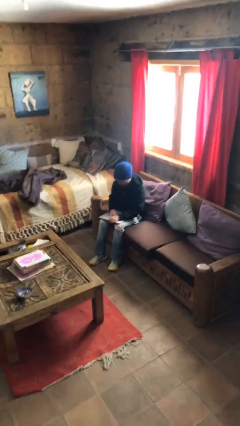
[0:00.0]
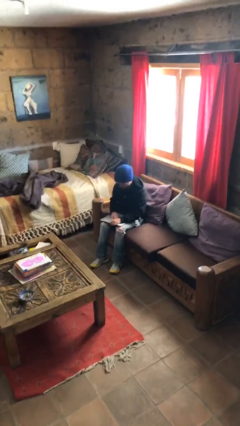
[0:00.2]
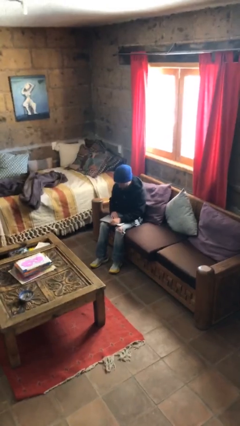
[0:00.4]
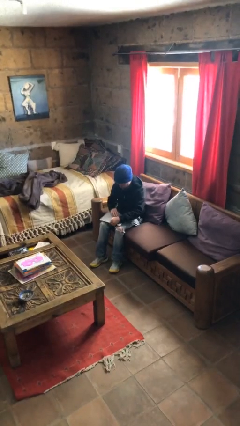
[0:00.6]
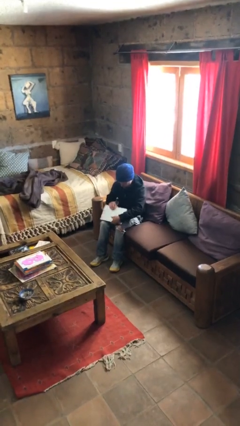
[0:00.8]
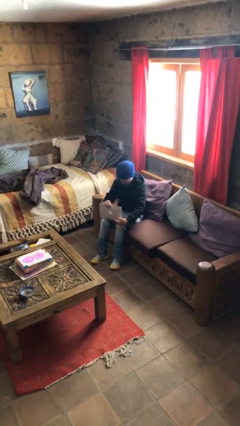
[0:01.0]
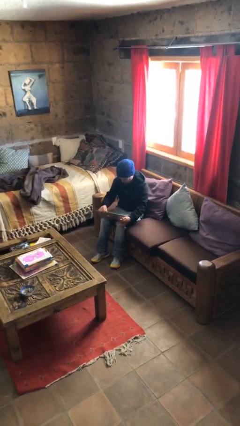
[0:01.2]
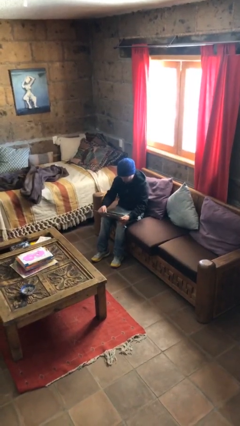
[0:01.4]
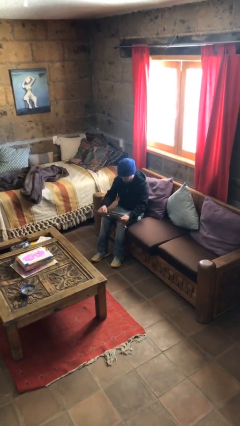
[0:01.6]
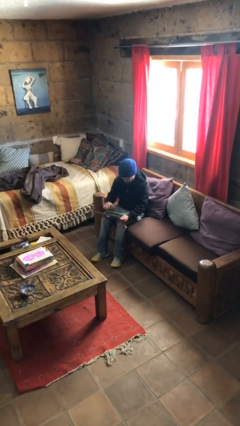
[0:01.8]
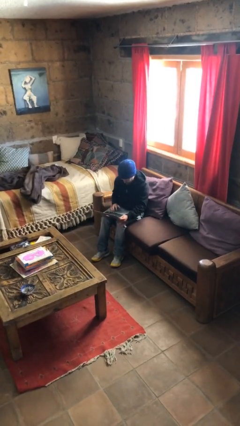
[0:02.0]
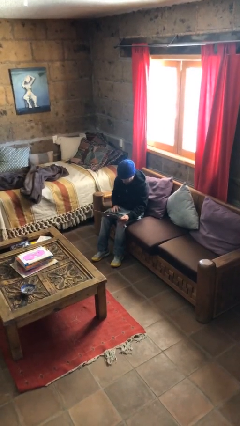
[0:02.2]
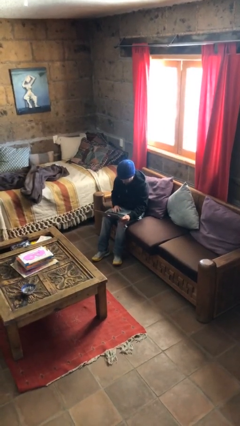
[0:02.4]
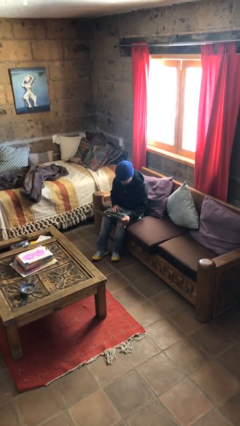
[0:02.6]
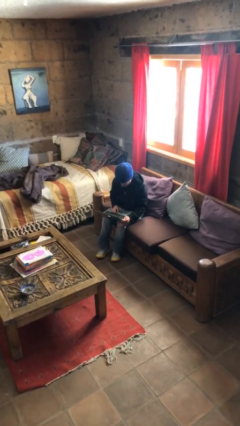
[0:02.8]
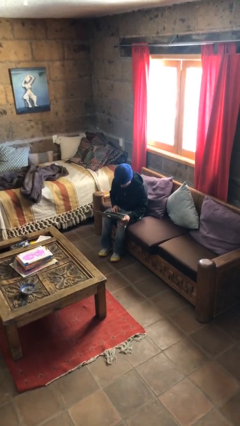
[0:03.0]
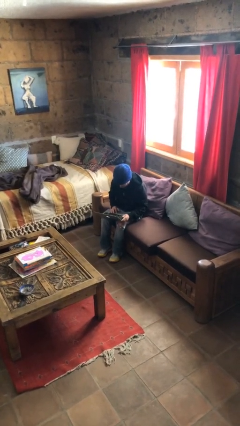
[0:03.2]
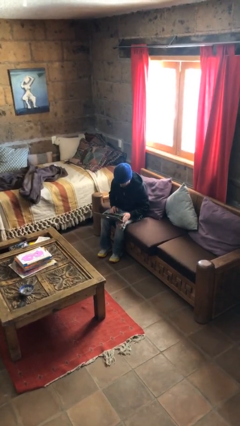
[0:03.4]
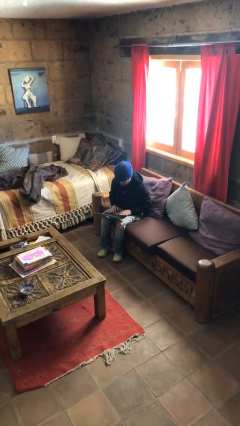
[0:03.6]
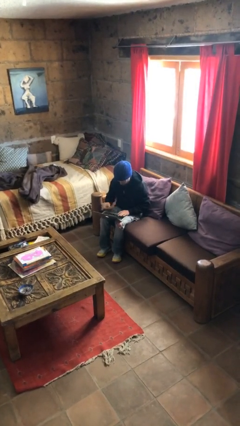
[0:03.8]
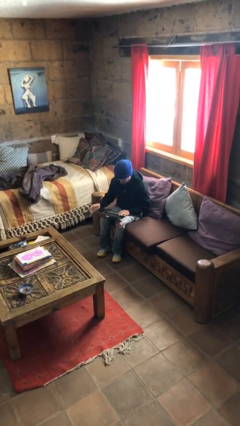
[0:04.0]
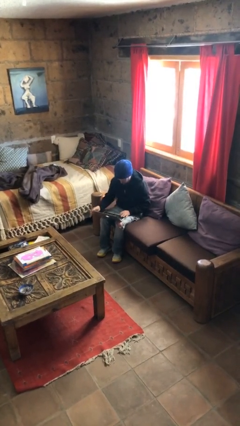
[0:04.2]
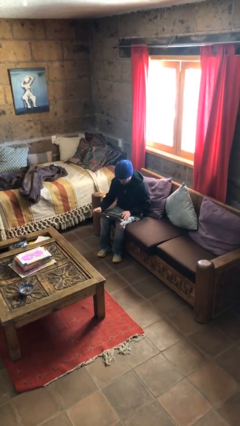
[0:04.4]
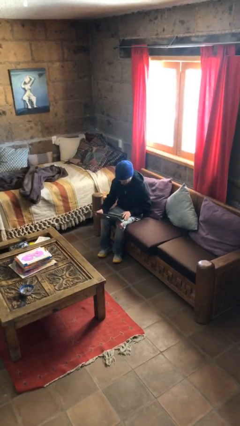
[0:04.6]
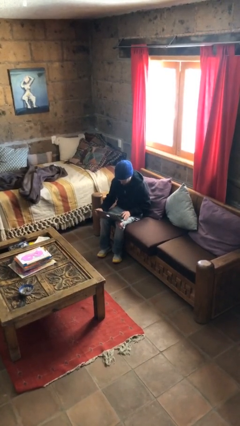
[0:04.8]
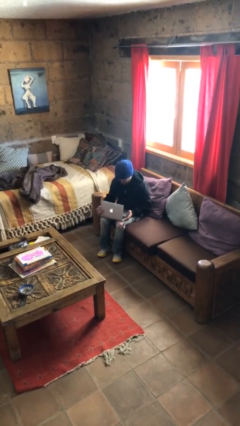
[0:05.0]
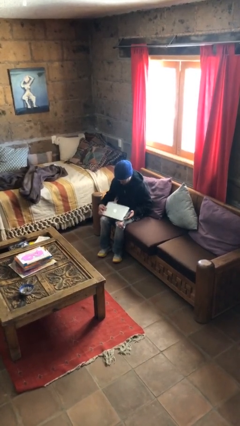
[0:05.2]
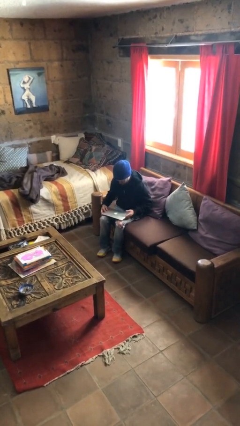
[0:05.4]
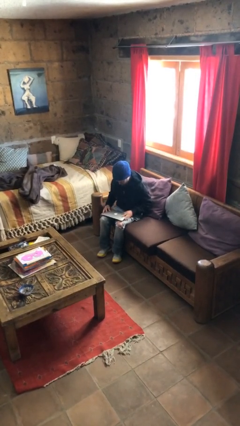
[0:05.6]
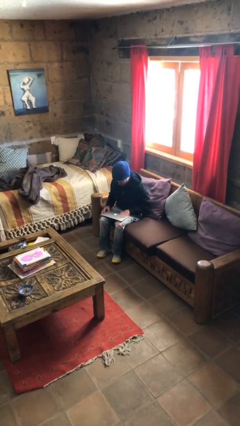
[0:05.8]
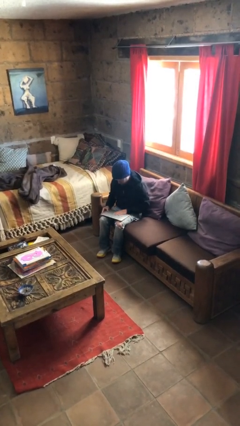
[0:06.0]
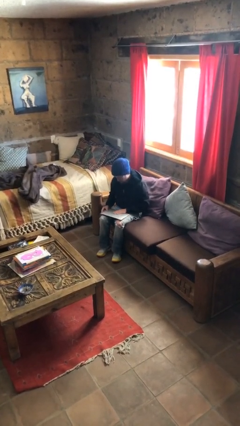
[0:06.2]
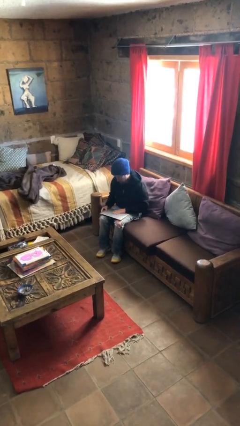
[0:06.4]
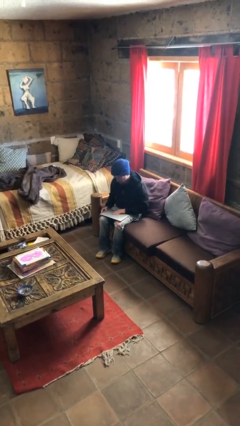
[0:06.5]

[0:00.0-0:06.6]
person interacts with laptop

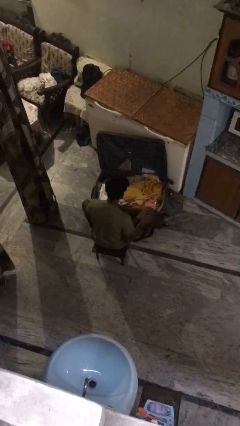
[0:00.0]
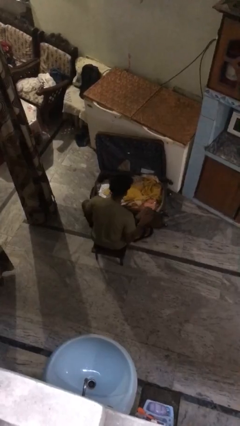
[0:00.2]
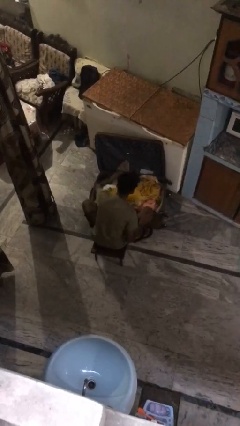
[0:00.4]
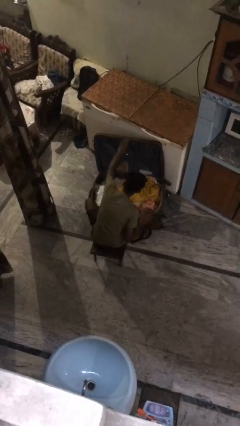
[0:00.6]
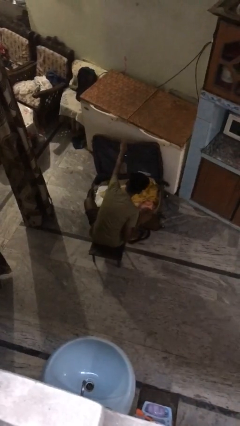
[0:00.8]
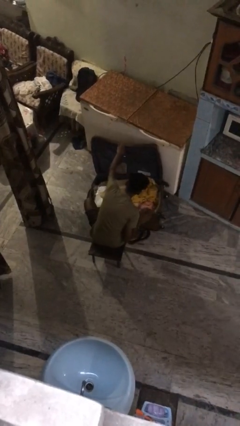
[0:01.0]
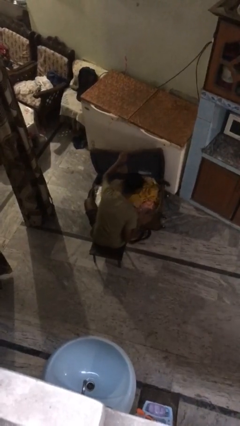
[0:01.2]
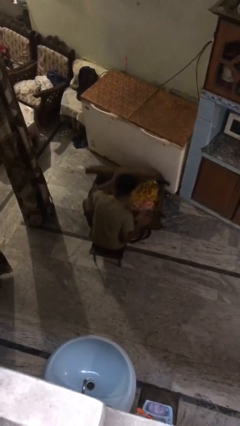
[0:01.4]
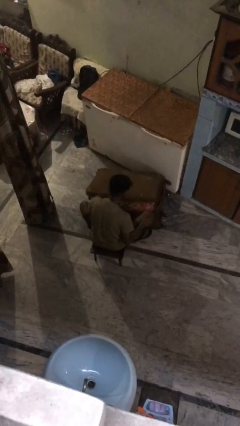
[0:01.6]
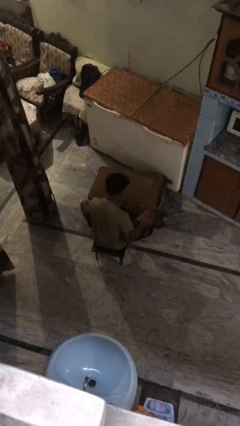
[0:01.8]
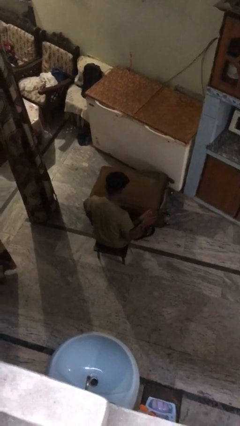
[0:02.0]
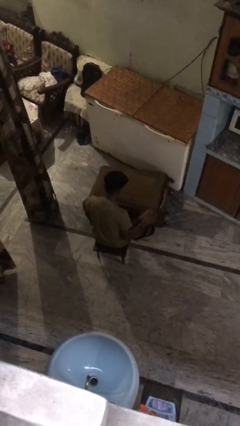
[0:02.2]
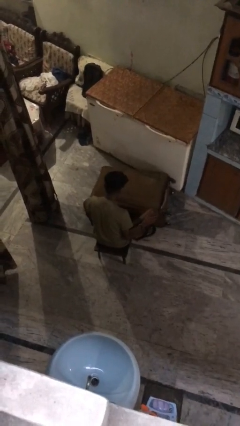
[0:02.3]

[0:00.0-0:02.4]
person closes suitcase

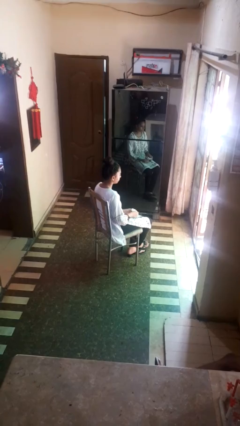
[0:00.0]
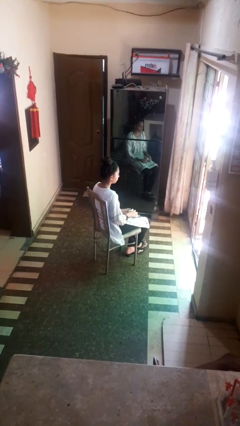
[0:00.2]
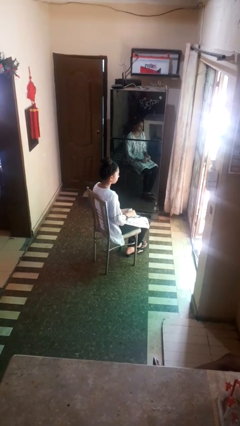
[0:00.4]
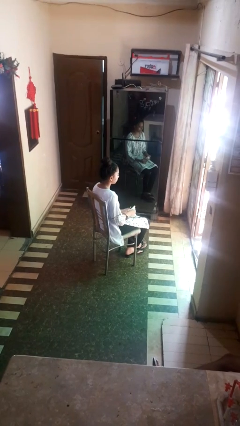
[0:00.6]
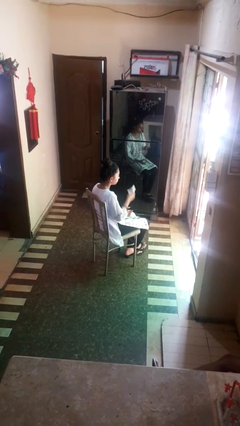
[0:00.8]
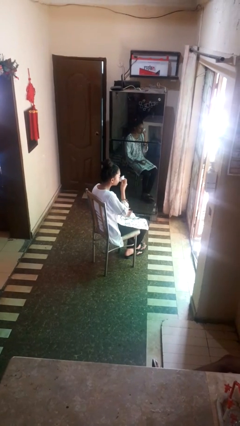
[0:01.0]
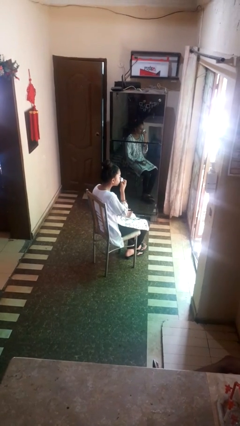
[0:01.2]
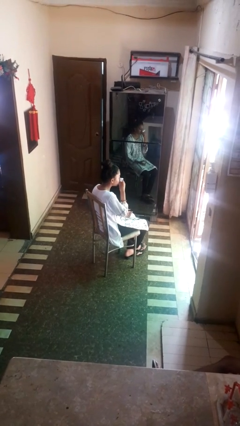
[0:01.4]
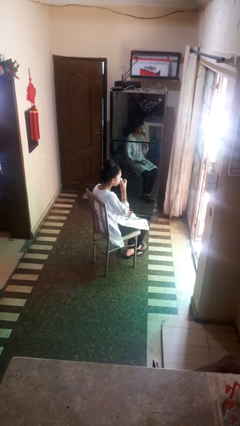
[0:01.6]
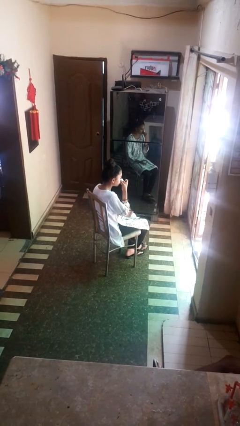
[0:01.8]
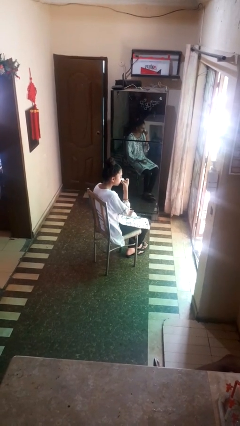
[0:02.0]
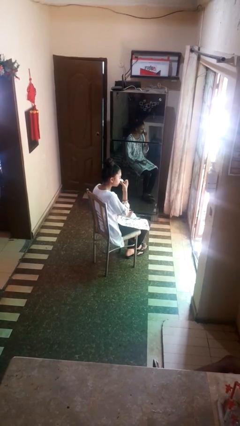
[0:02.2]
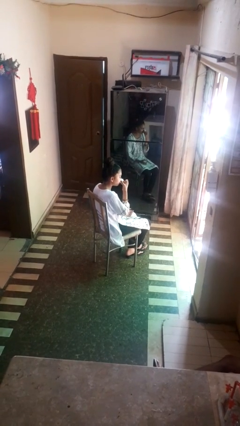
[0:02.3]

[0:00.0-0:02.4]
person blows nose

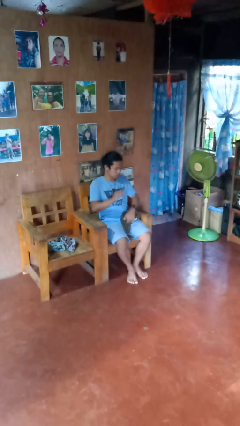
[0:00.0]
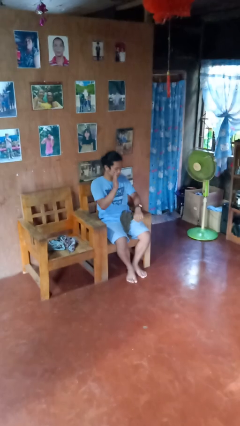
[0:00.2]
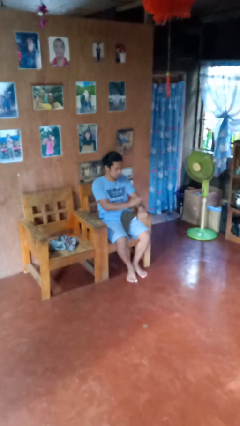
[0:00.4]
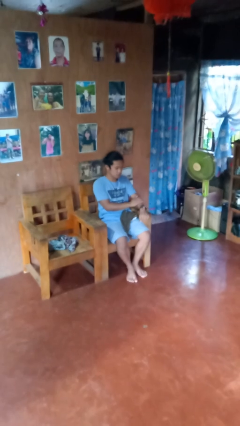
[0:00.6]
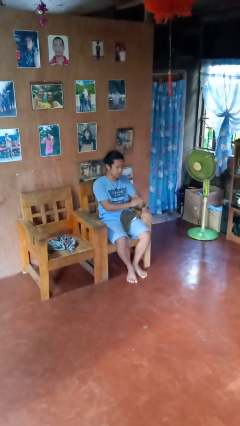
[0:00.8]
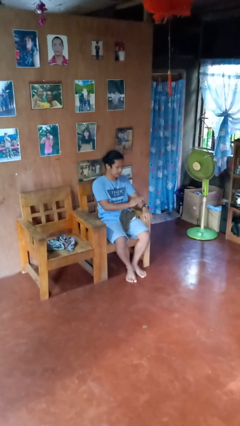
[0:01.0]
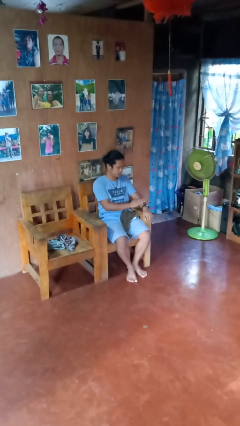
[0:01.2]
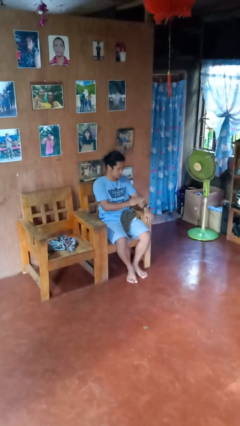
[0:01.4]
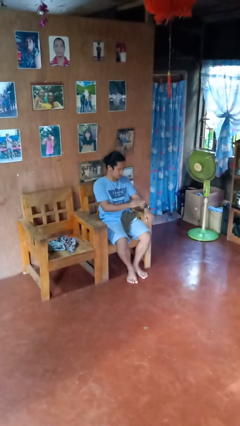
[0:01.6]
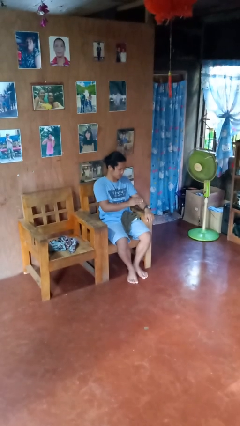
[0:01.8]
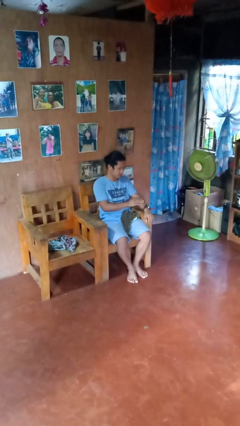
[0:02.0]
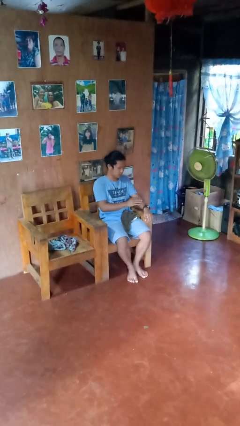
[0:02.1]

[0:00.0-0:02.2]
person swats bug

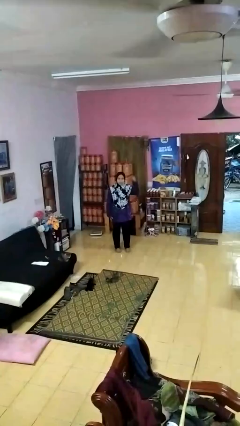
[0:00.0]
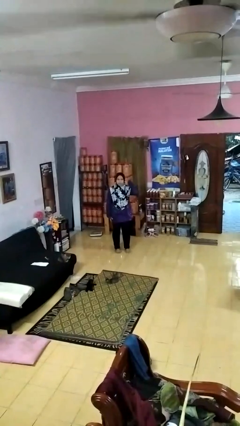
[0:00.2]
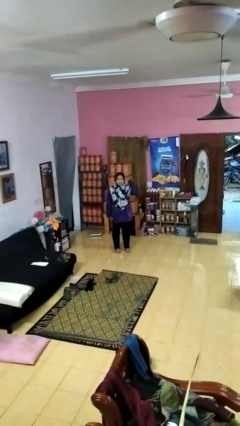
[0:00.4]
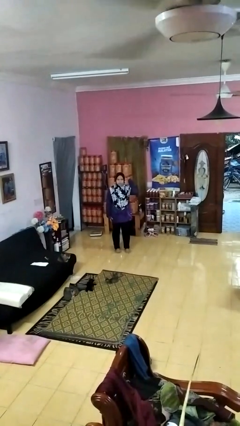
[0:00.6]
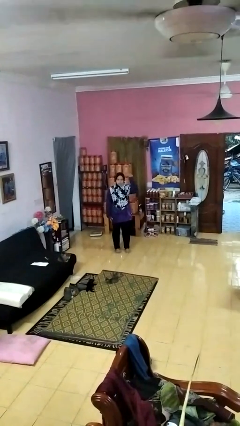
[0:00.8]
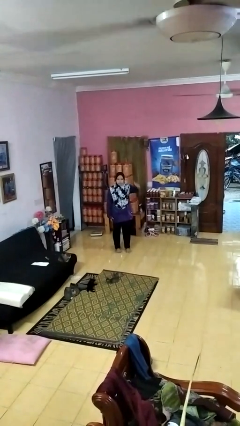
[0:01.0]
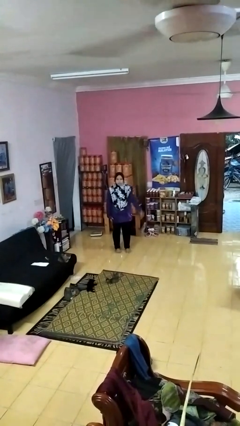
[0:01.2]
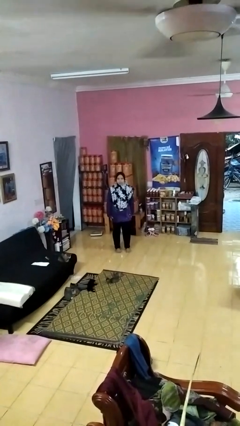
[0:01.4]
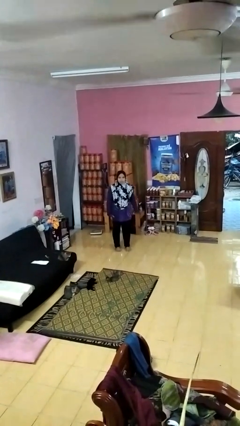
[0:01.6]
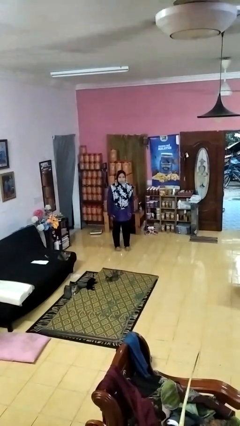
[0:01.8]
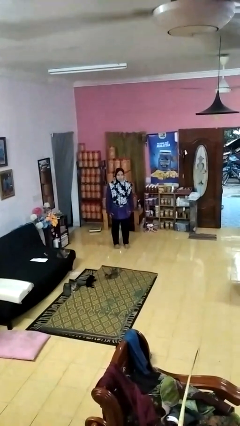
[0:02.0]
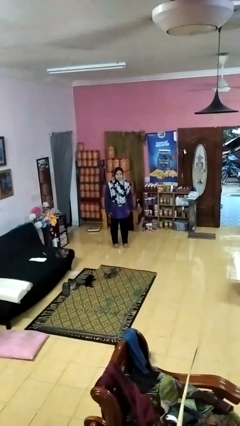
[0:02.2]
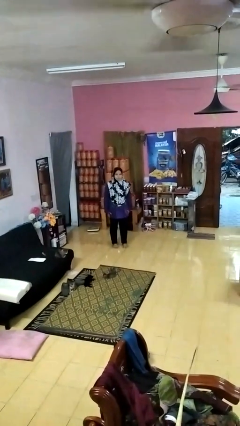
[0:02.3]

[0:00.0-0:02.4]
person gestures behind me

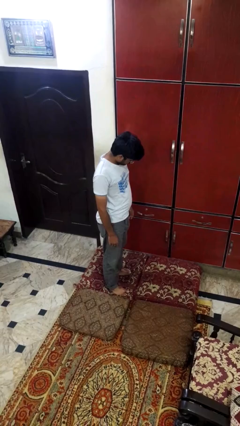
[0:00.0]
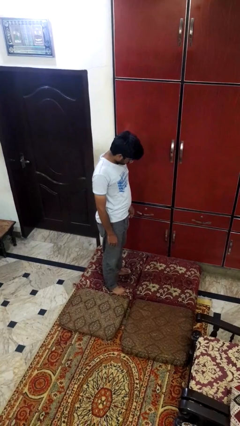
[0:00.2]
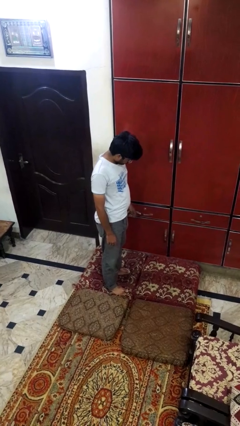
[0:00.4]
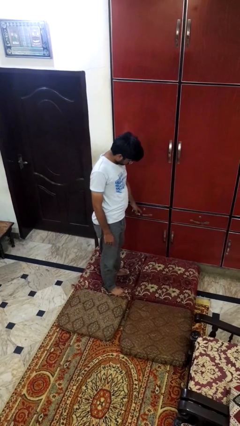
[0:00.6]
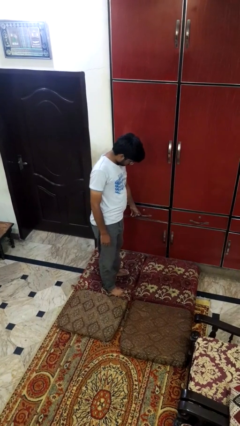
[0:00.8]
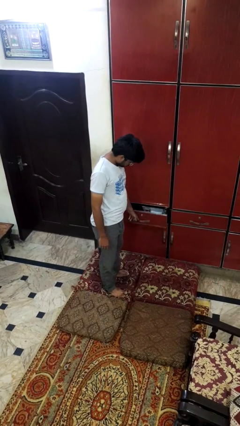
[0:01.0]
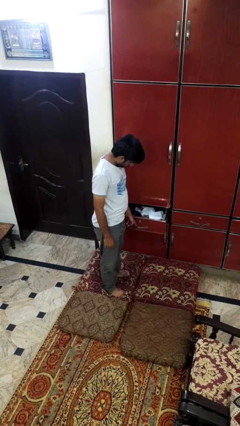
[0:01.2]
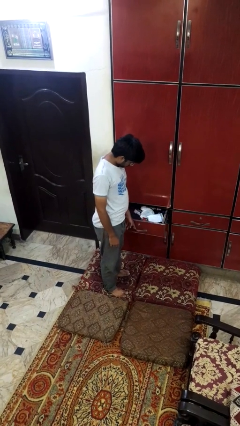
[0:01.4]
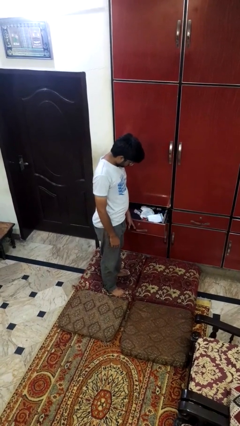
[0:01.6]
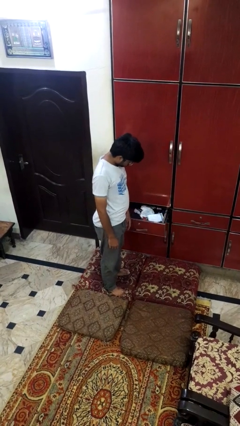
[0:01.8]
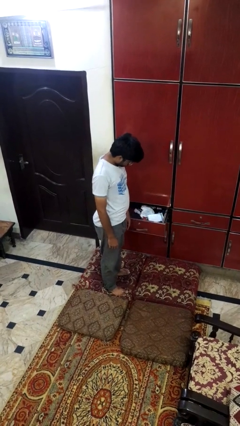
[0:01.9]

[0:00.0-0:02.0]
person opens dresser drawer
